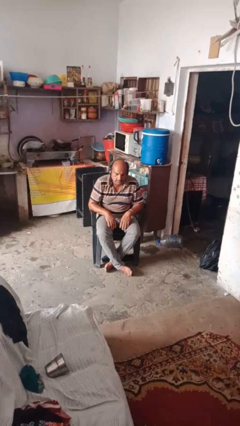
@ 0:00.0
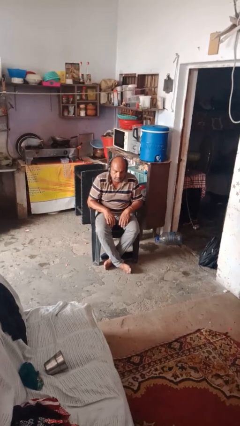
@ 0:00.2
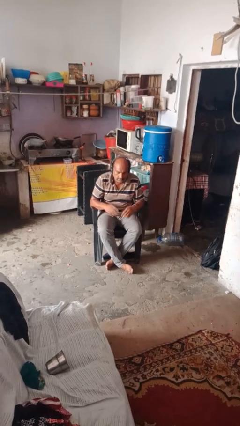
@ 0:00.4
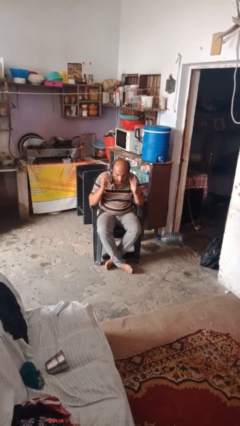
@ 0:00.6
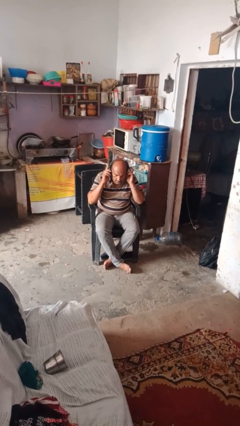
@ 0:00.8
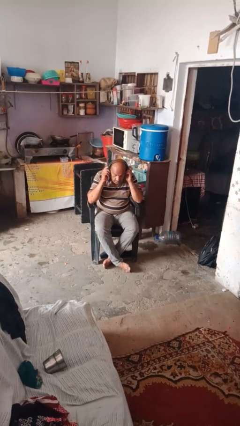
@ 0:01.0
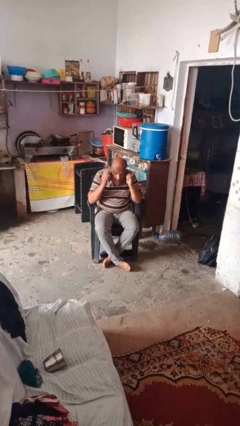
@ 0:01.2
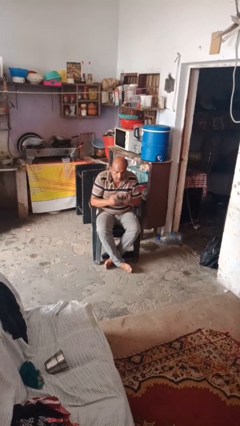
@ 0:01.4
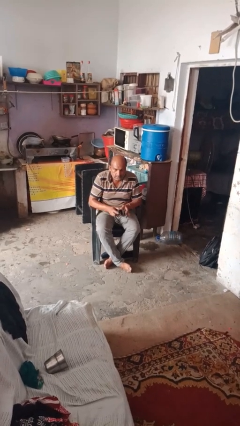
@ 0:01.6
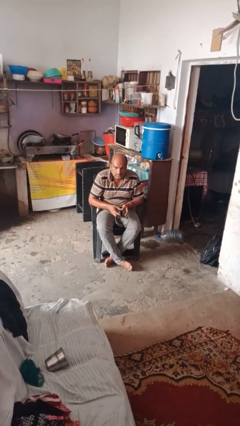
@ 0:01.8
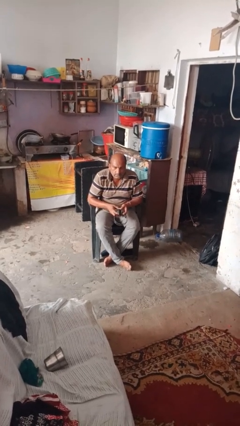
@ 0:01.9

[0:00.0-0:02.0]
person takes off headphones

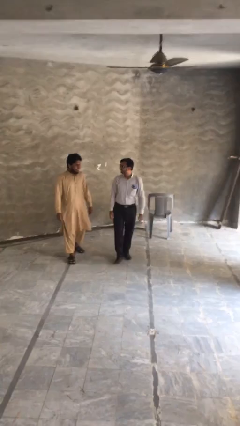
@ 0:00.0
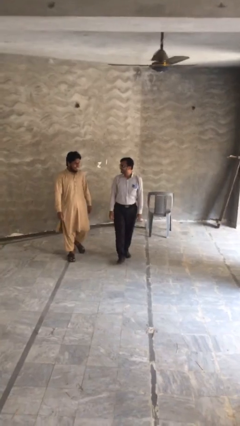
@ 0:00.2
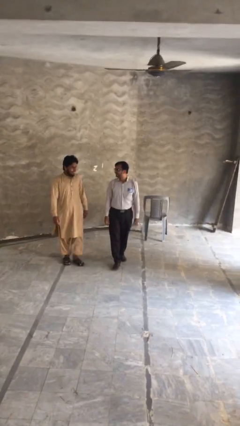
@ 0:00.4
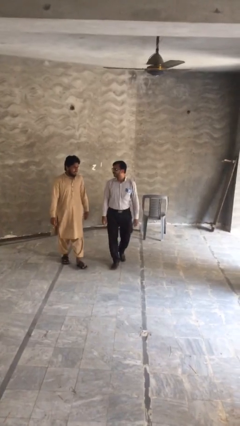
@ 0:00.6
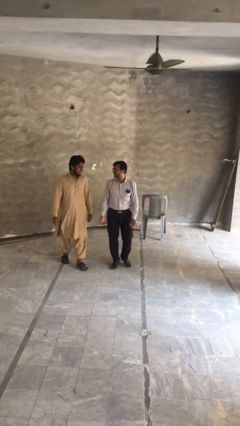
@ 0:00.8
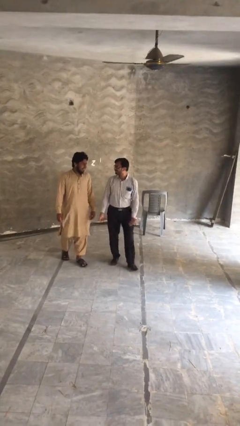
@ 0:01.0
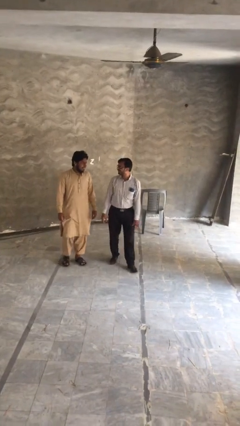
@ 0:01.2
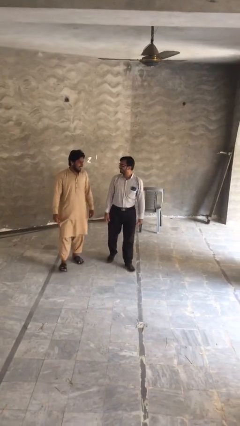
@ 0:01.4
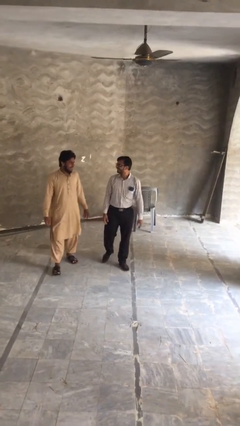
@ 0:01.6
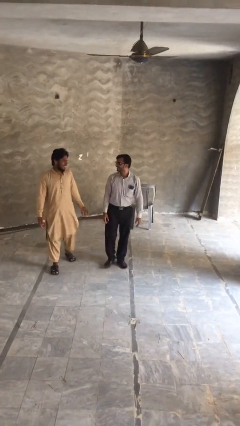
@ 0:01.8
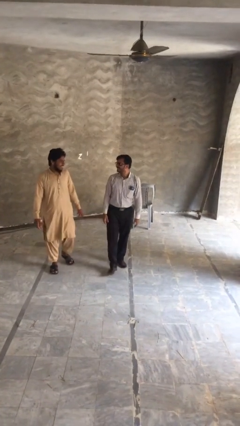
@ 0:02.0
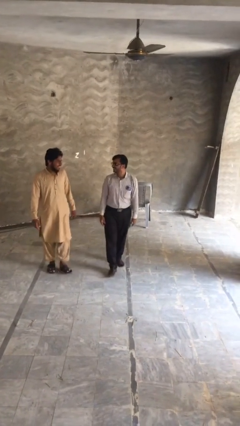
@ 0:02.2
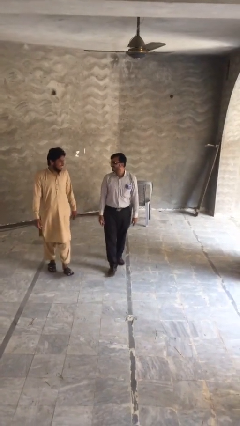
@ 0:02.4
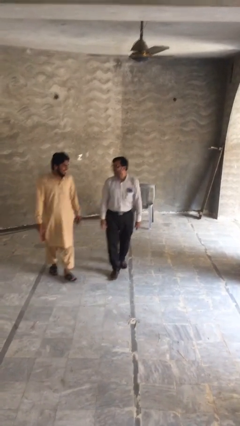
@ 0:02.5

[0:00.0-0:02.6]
person talks to person

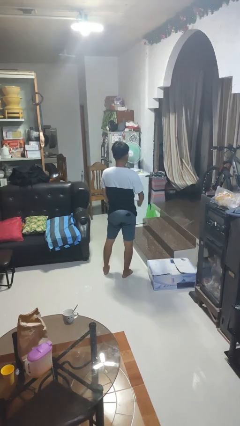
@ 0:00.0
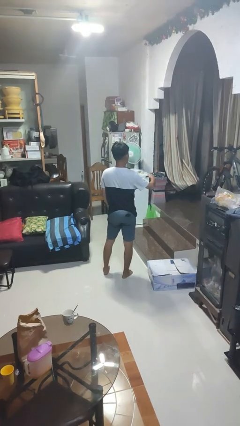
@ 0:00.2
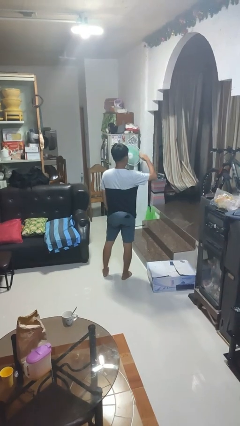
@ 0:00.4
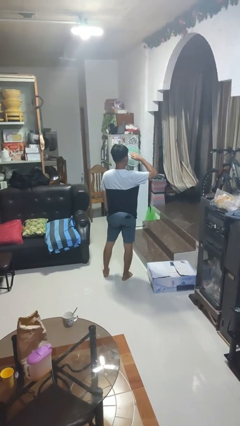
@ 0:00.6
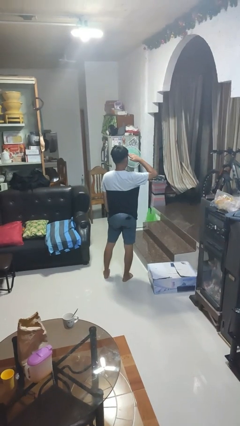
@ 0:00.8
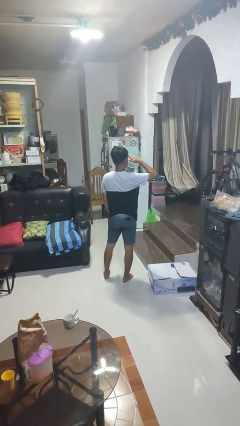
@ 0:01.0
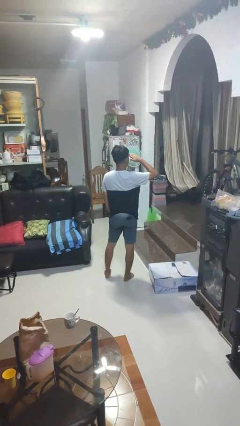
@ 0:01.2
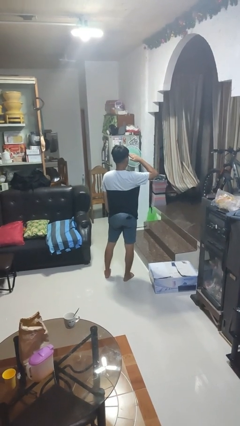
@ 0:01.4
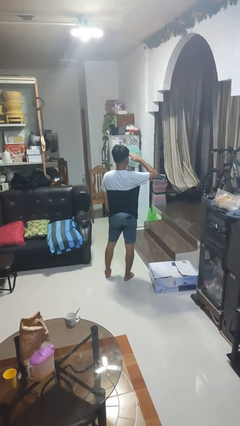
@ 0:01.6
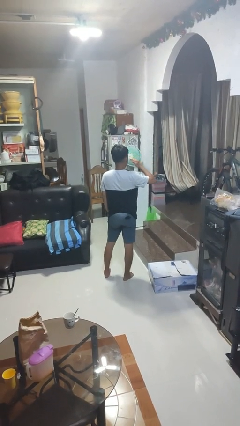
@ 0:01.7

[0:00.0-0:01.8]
person salutes

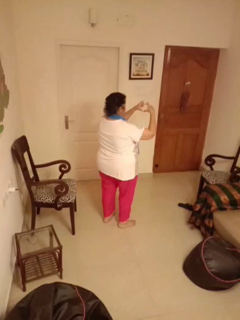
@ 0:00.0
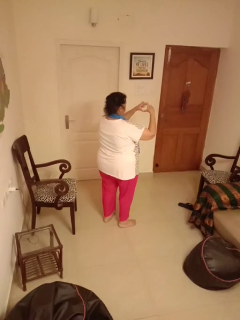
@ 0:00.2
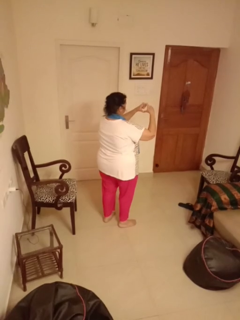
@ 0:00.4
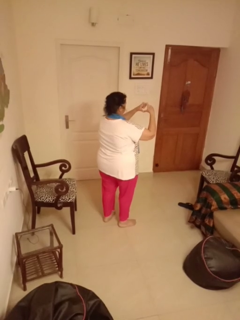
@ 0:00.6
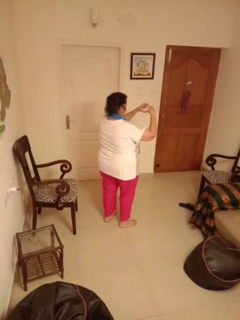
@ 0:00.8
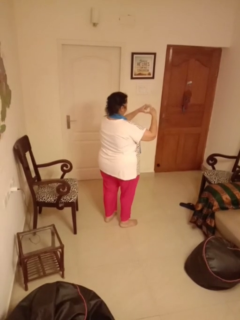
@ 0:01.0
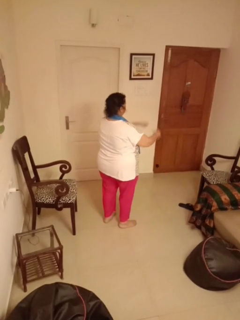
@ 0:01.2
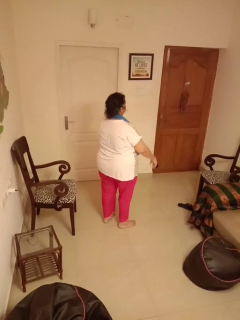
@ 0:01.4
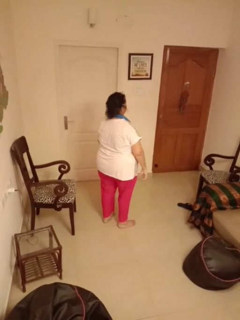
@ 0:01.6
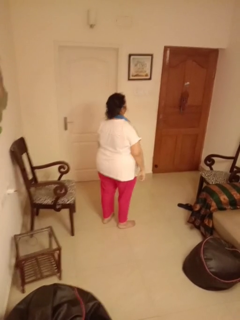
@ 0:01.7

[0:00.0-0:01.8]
person gestures heart

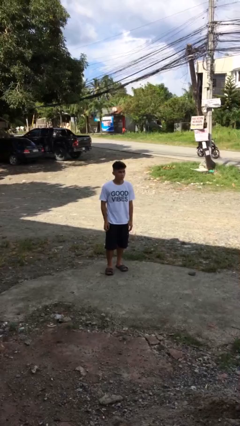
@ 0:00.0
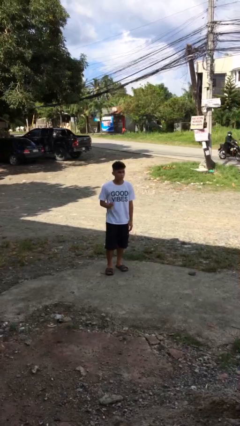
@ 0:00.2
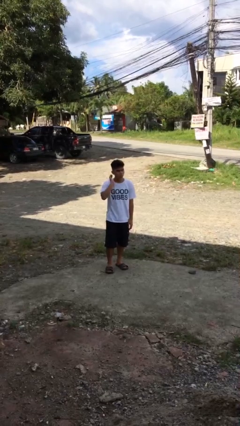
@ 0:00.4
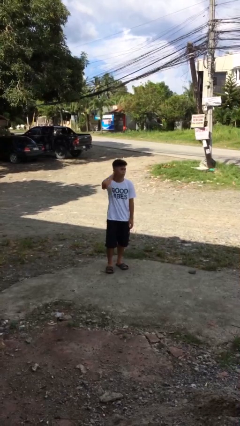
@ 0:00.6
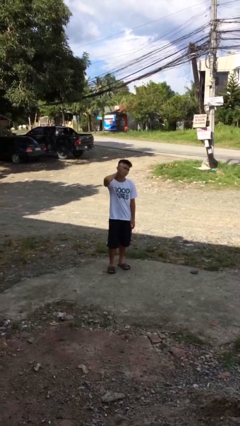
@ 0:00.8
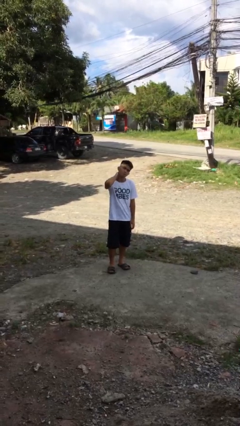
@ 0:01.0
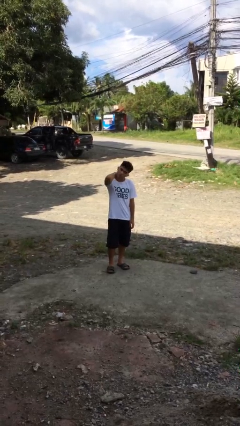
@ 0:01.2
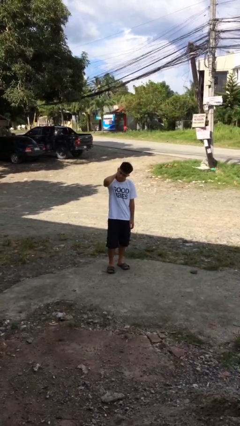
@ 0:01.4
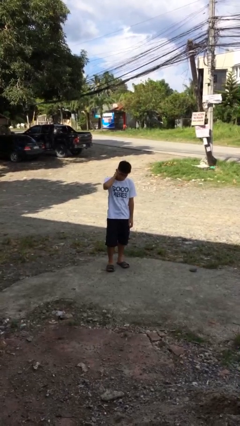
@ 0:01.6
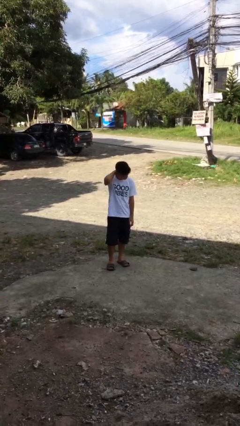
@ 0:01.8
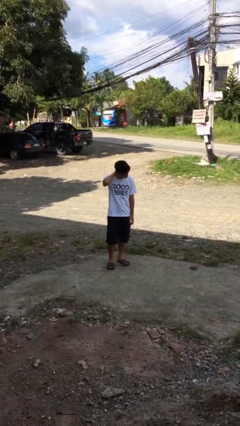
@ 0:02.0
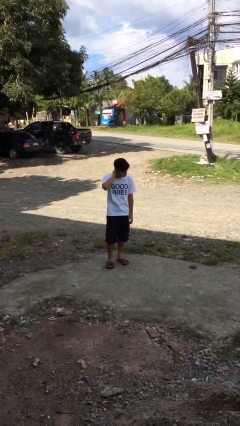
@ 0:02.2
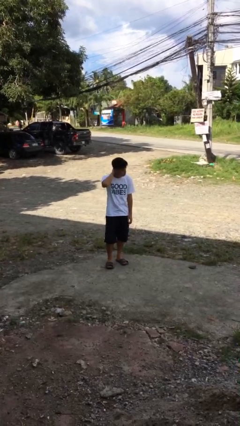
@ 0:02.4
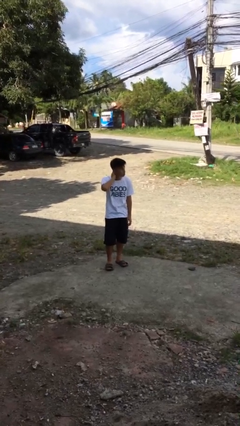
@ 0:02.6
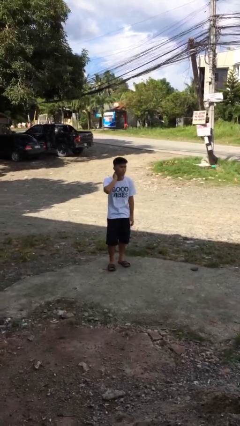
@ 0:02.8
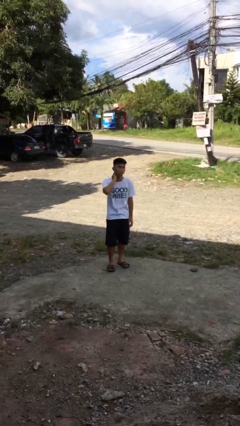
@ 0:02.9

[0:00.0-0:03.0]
person rubs neck

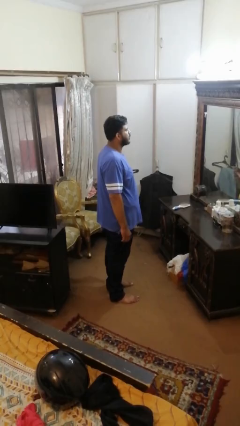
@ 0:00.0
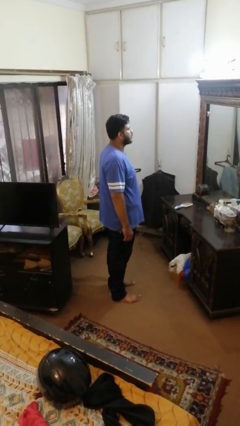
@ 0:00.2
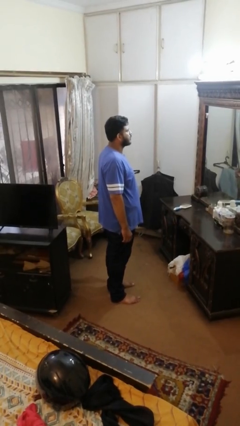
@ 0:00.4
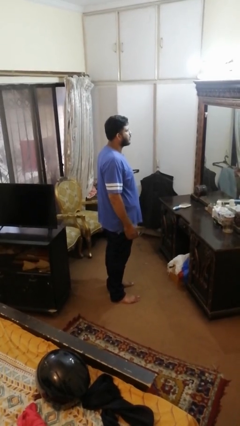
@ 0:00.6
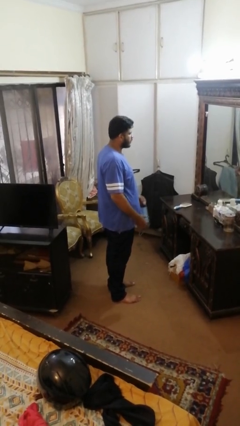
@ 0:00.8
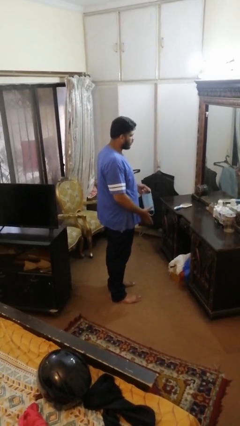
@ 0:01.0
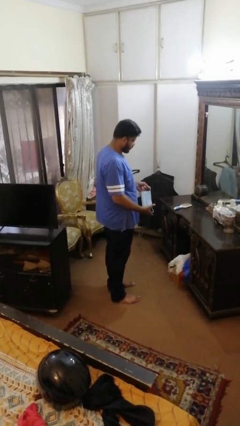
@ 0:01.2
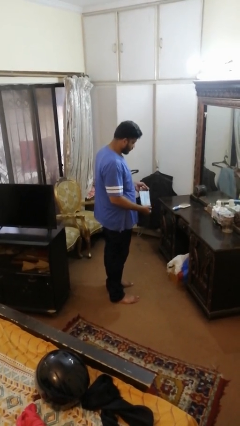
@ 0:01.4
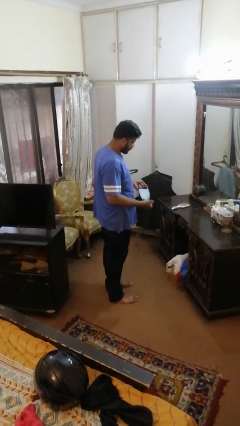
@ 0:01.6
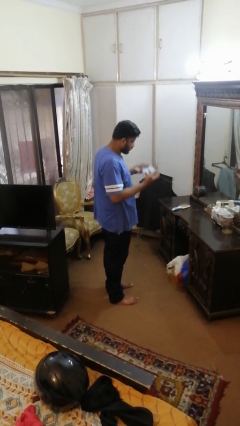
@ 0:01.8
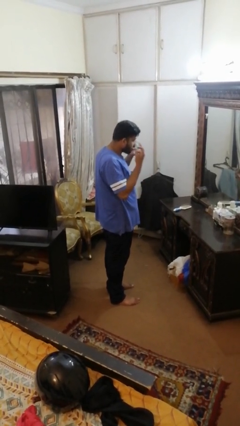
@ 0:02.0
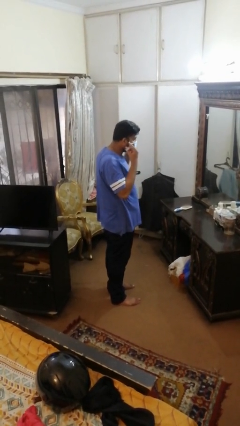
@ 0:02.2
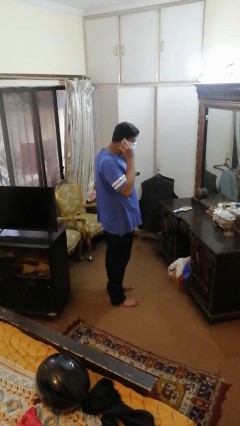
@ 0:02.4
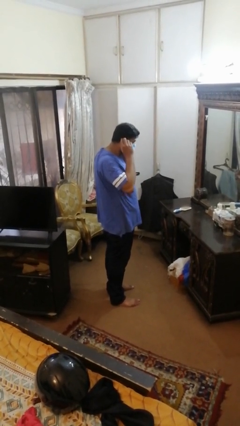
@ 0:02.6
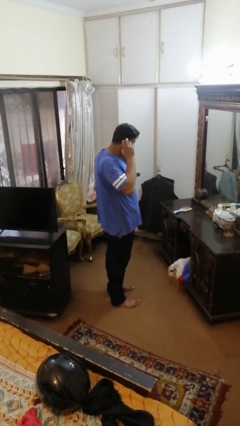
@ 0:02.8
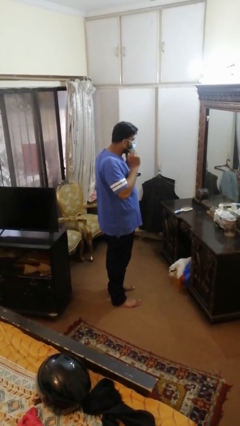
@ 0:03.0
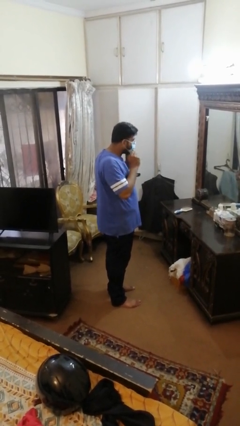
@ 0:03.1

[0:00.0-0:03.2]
person puts on facemask

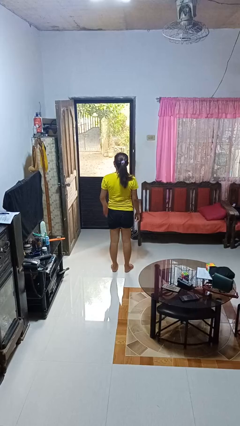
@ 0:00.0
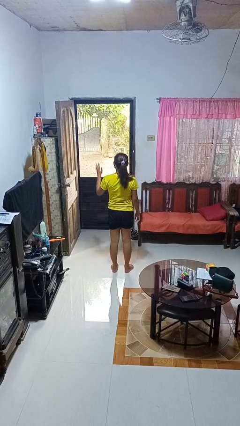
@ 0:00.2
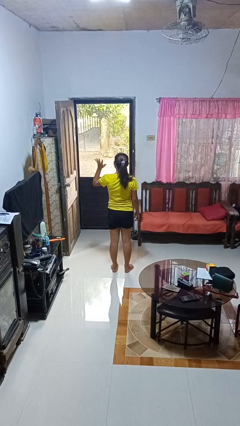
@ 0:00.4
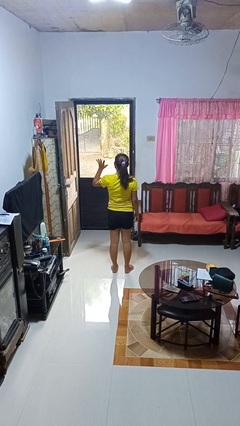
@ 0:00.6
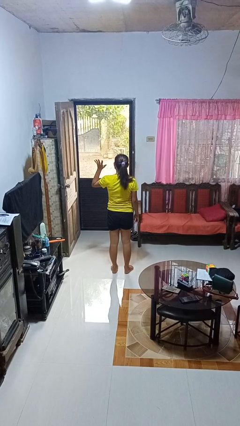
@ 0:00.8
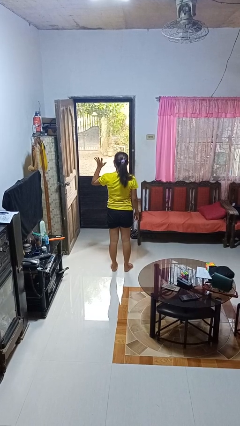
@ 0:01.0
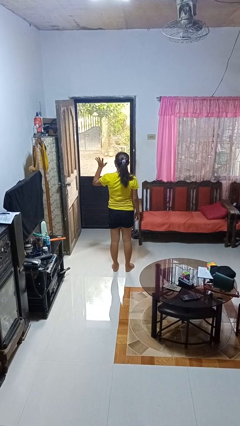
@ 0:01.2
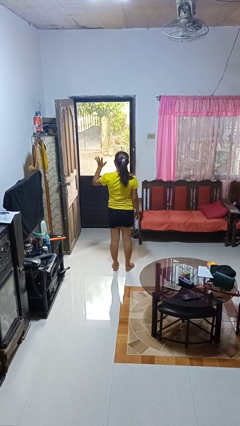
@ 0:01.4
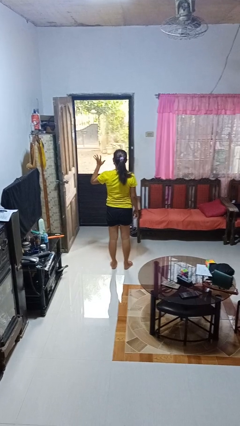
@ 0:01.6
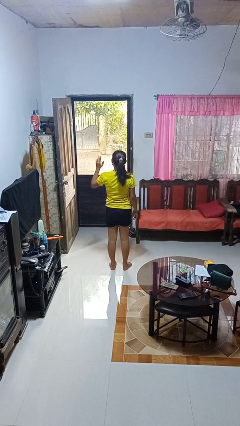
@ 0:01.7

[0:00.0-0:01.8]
person gestures number five

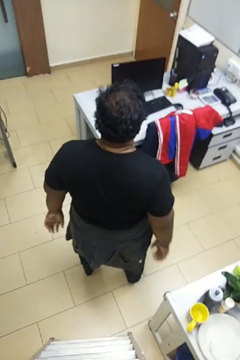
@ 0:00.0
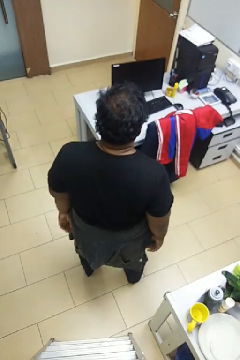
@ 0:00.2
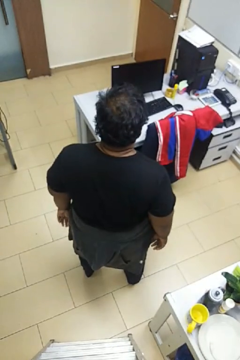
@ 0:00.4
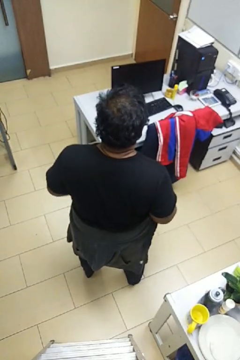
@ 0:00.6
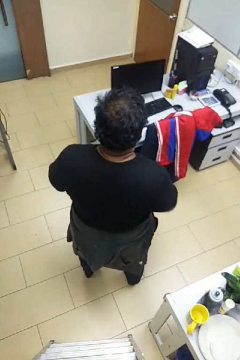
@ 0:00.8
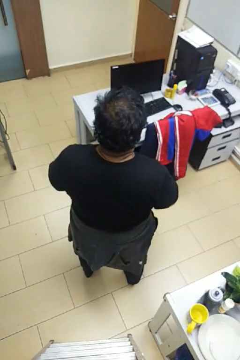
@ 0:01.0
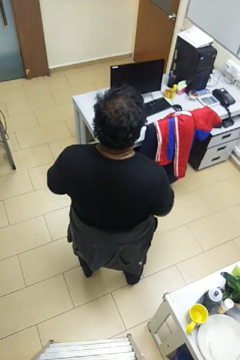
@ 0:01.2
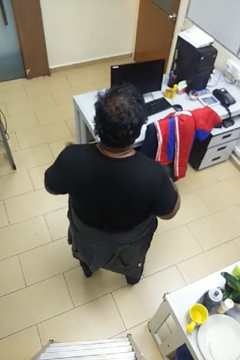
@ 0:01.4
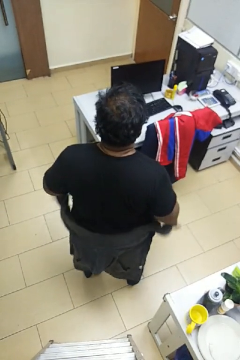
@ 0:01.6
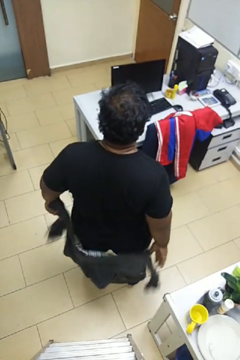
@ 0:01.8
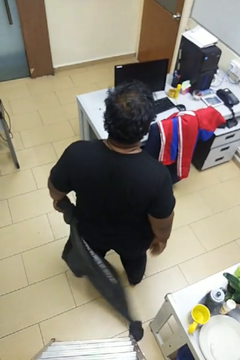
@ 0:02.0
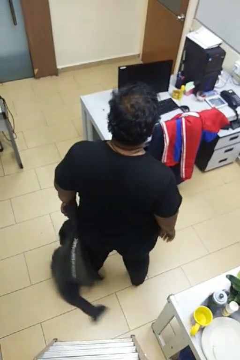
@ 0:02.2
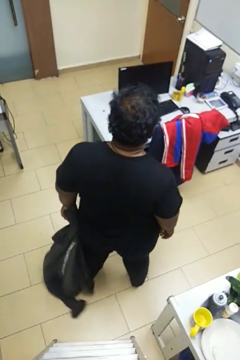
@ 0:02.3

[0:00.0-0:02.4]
person unties jacket around waist
